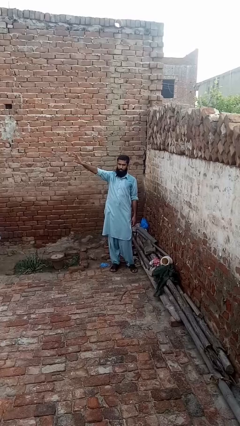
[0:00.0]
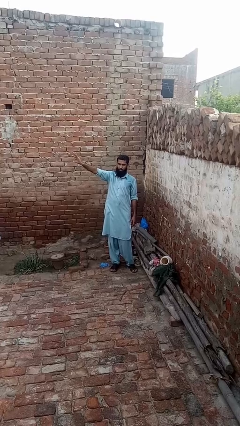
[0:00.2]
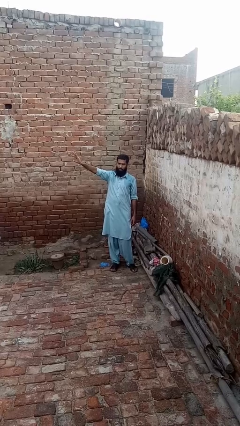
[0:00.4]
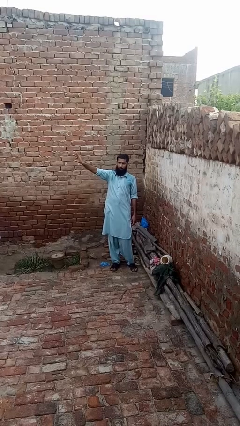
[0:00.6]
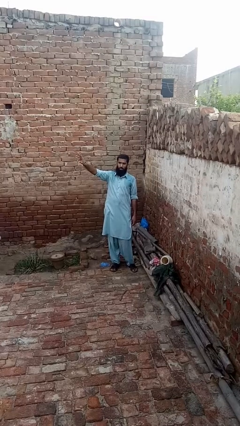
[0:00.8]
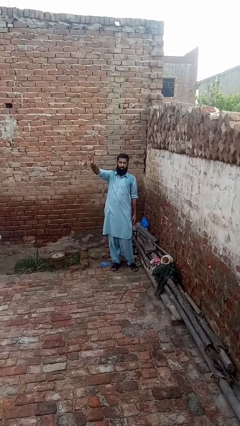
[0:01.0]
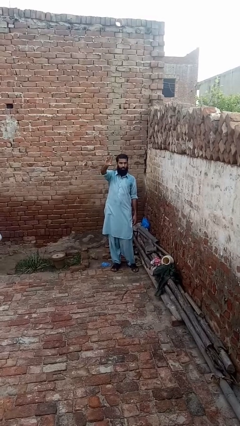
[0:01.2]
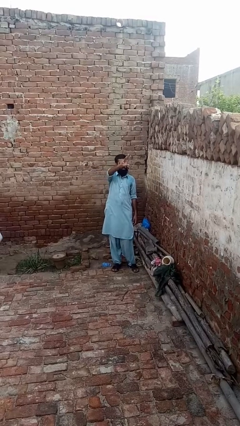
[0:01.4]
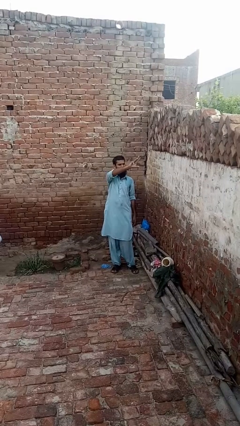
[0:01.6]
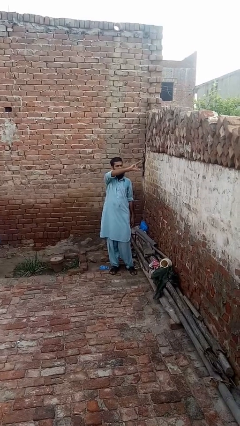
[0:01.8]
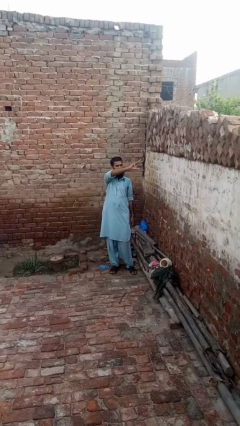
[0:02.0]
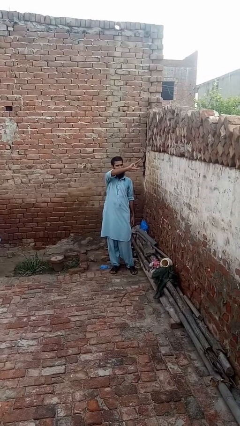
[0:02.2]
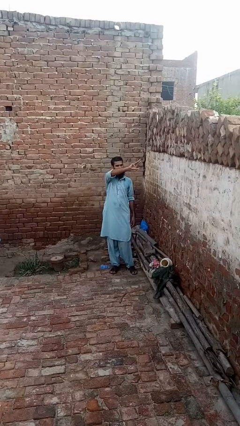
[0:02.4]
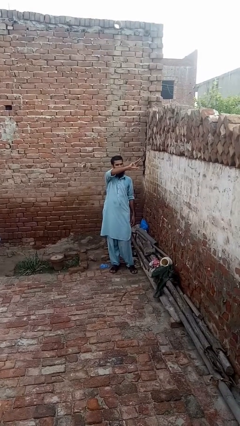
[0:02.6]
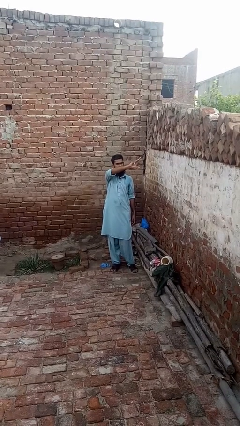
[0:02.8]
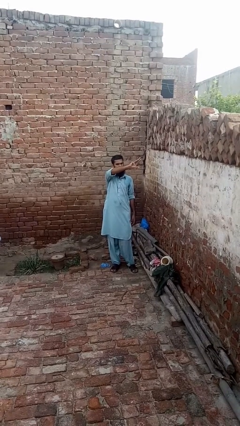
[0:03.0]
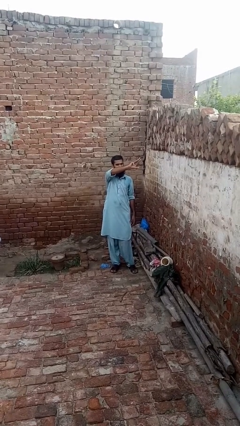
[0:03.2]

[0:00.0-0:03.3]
person gestures swipe left

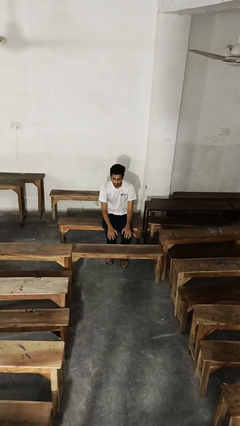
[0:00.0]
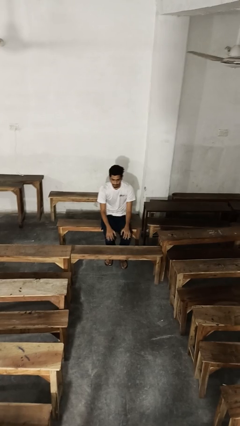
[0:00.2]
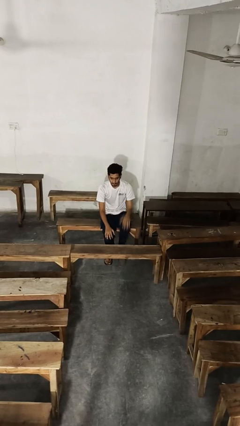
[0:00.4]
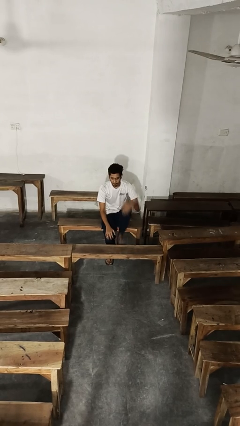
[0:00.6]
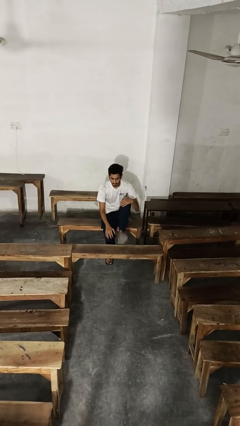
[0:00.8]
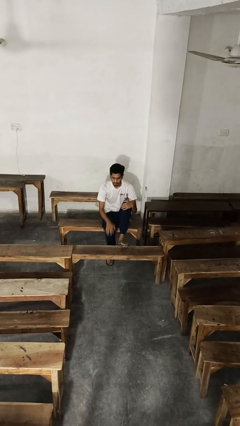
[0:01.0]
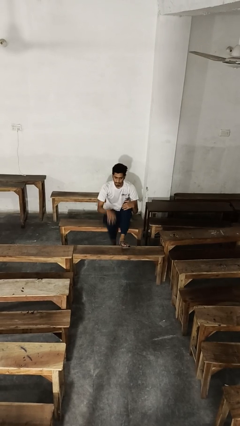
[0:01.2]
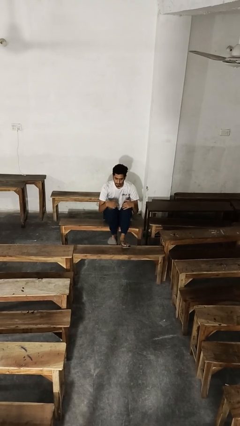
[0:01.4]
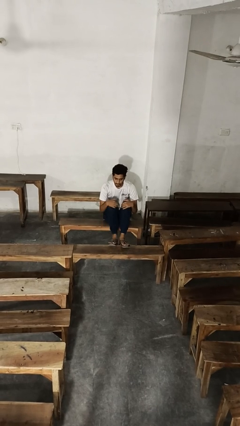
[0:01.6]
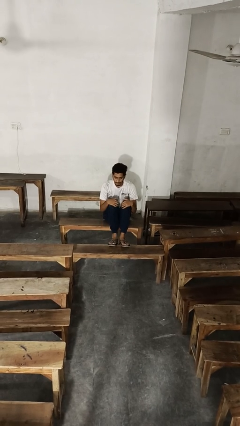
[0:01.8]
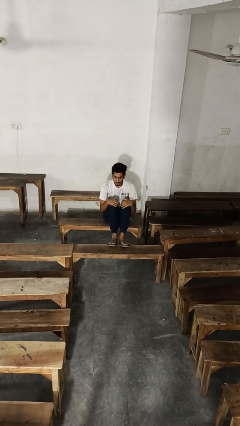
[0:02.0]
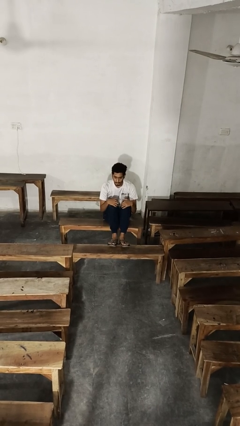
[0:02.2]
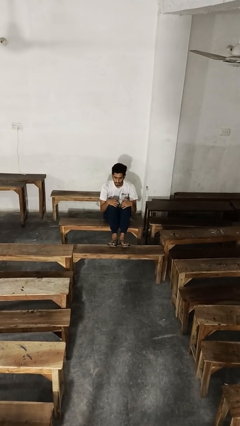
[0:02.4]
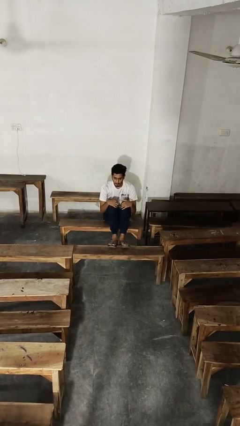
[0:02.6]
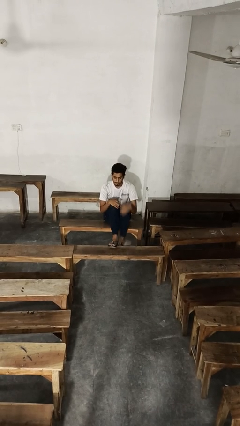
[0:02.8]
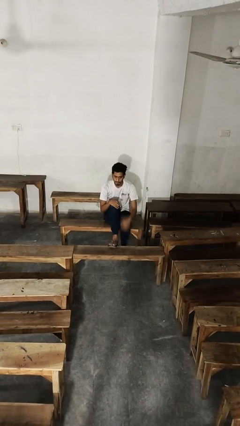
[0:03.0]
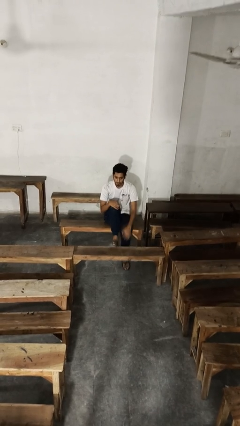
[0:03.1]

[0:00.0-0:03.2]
person puts feet up

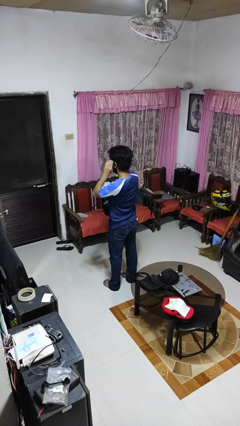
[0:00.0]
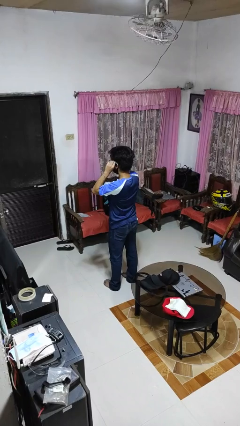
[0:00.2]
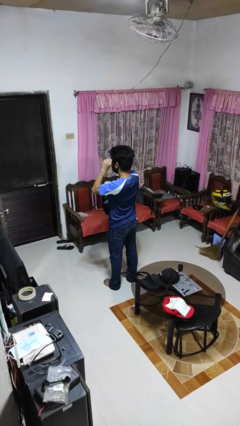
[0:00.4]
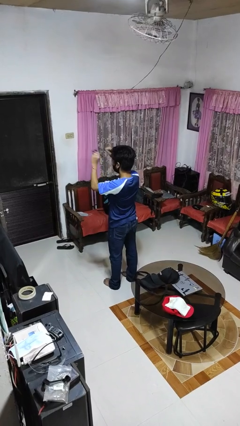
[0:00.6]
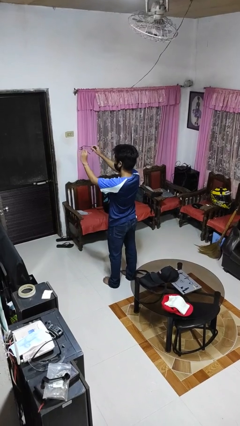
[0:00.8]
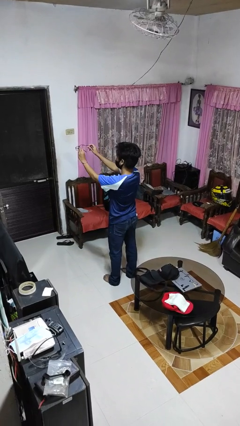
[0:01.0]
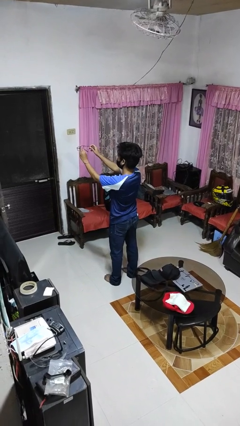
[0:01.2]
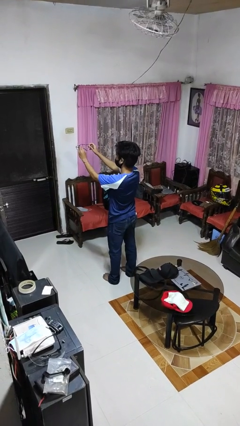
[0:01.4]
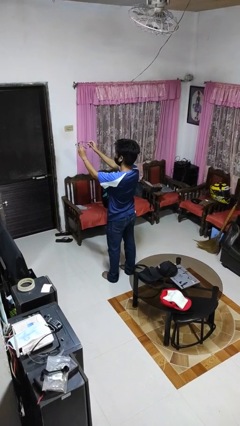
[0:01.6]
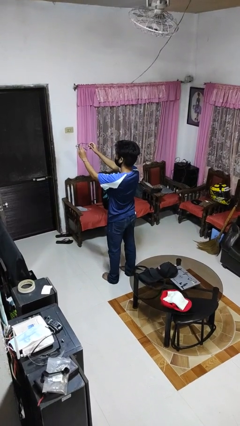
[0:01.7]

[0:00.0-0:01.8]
person takes off glasses

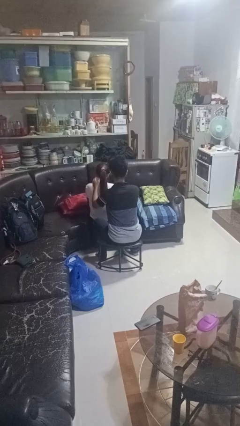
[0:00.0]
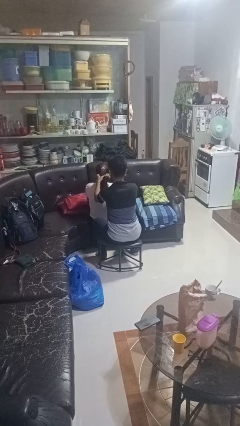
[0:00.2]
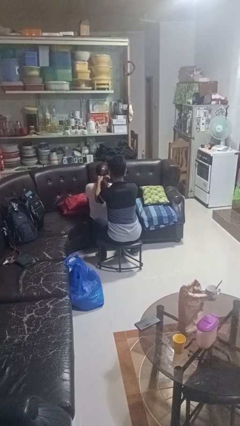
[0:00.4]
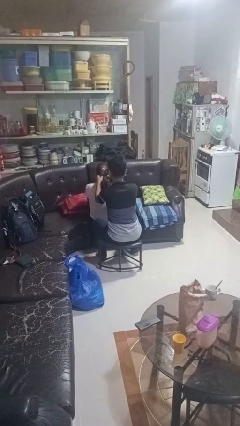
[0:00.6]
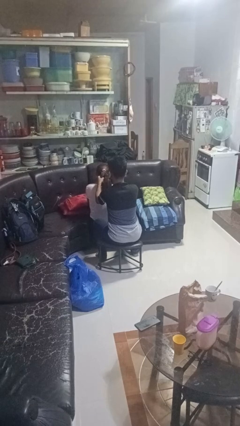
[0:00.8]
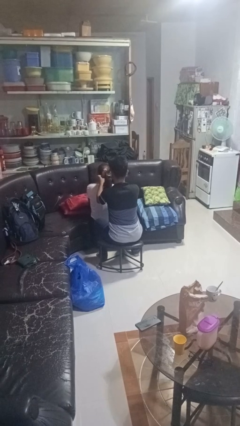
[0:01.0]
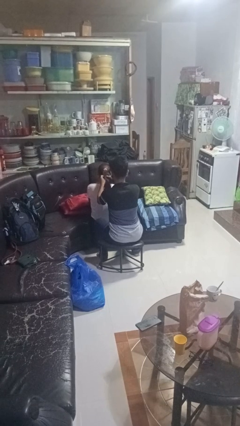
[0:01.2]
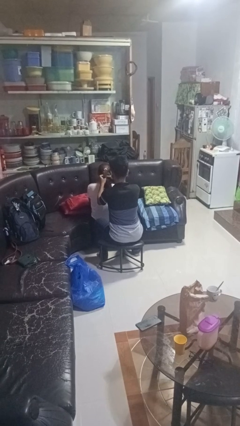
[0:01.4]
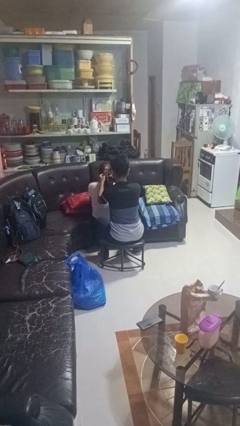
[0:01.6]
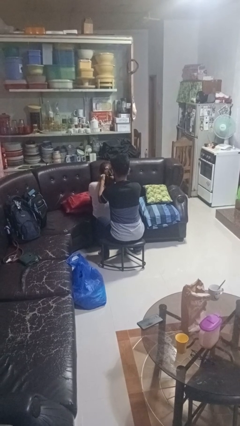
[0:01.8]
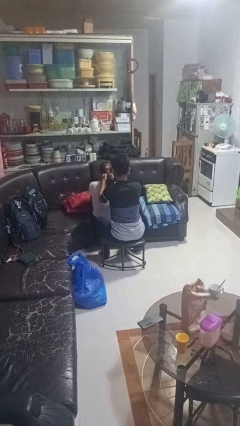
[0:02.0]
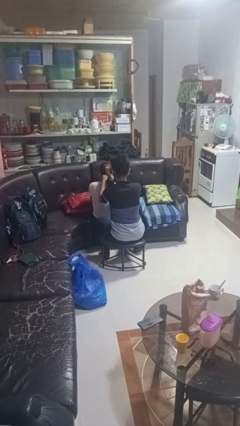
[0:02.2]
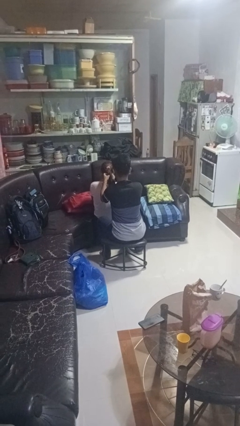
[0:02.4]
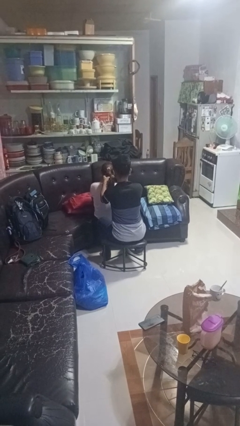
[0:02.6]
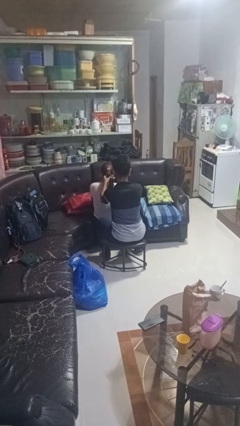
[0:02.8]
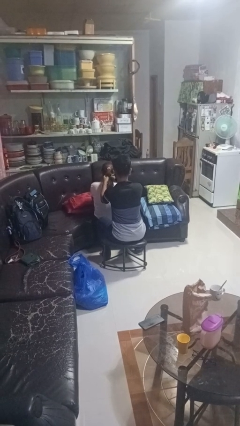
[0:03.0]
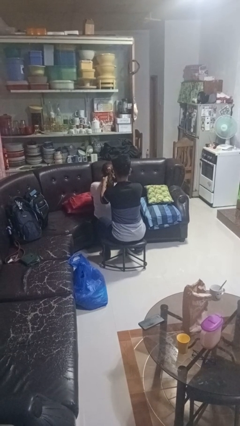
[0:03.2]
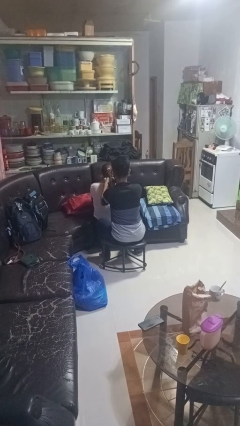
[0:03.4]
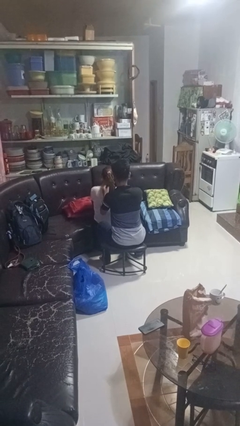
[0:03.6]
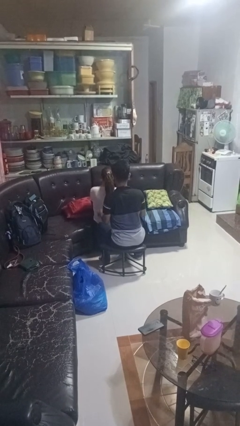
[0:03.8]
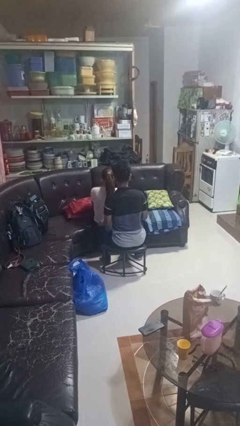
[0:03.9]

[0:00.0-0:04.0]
person braids hair of person

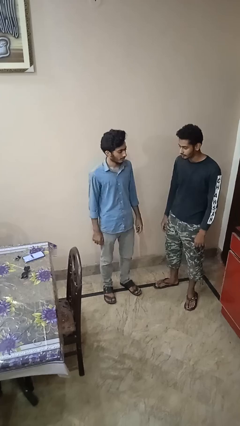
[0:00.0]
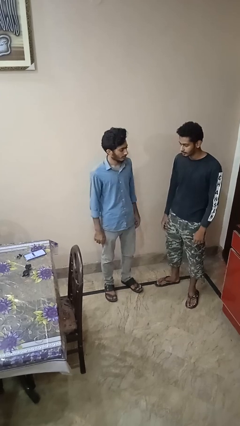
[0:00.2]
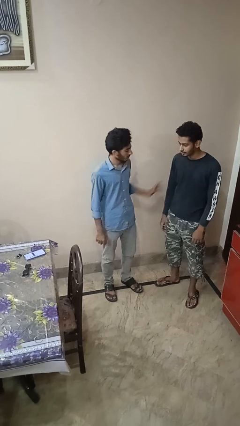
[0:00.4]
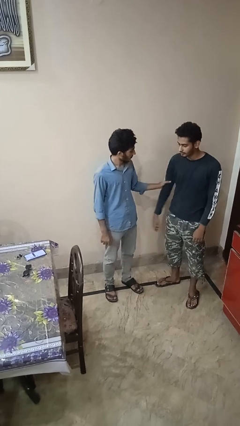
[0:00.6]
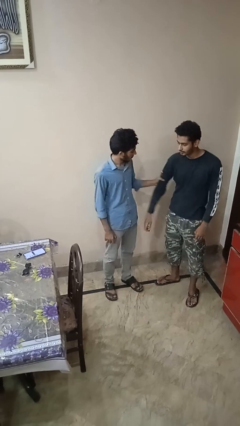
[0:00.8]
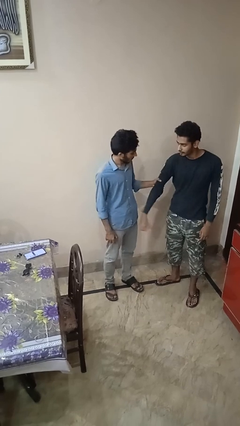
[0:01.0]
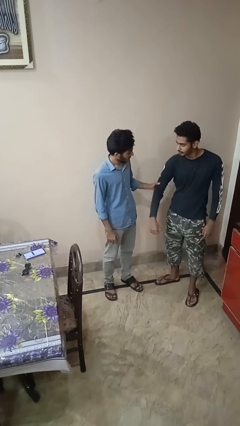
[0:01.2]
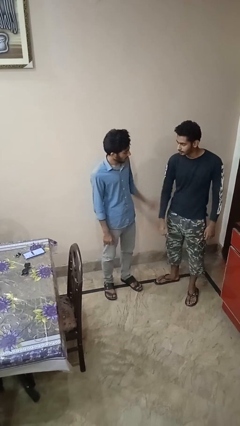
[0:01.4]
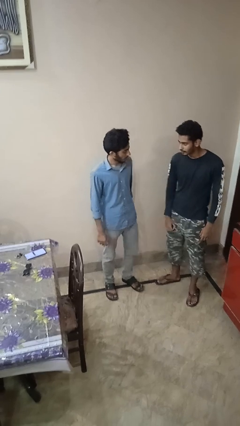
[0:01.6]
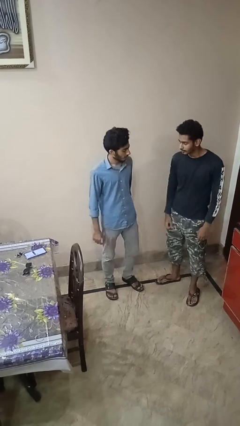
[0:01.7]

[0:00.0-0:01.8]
person grabs person by bicep

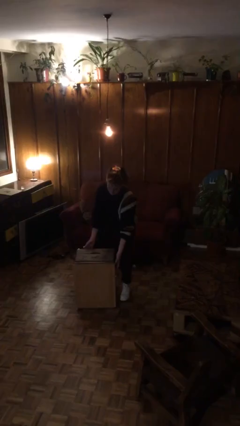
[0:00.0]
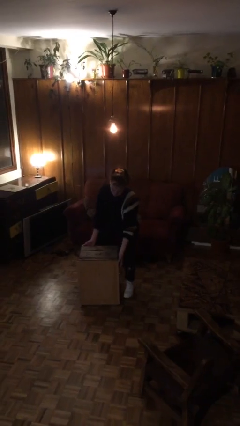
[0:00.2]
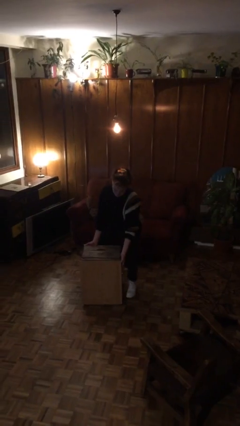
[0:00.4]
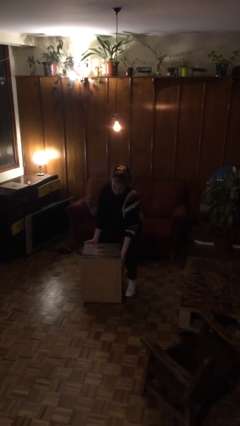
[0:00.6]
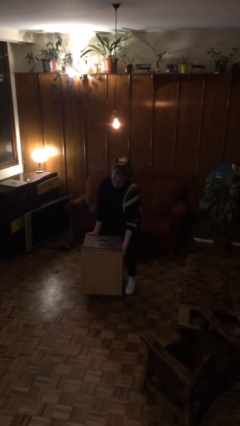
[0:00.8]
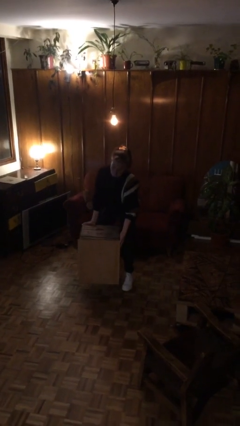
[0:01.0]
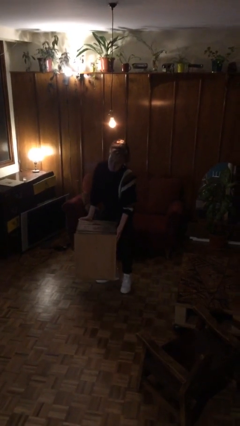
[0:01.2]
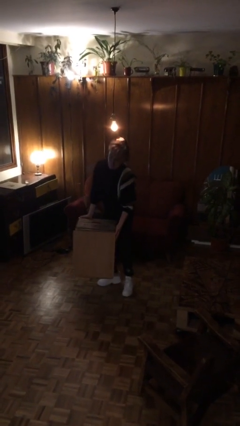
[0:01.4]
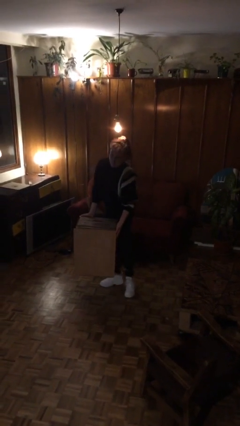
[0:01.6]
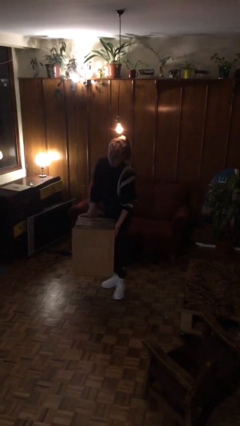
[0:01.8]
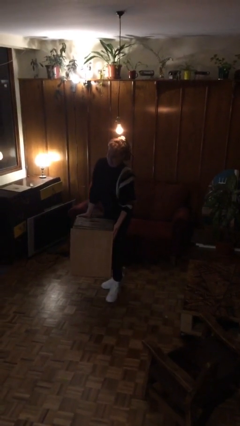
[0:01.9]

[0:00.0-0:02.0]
person picks up object from floor

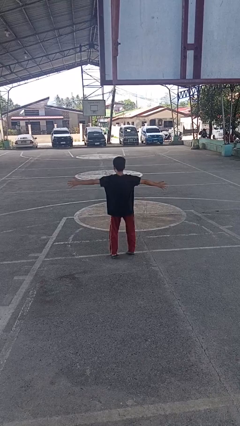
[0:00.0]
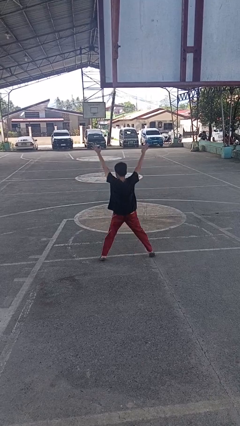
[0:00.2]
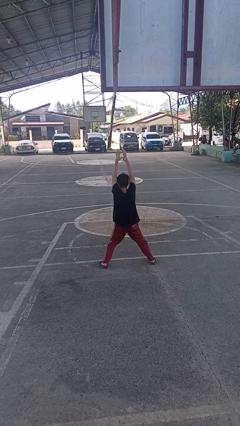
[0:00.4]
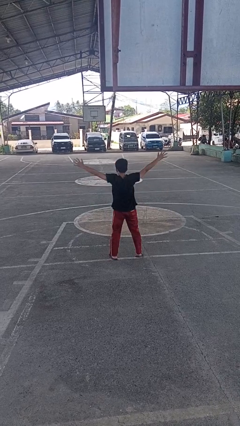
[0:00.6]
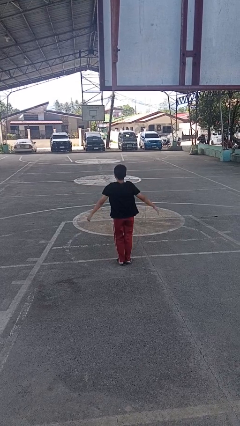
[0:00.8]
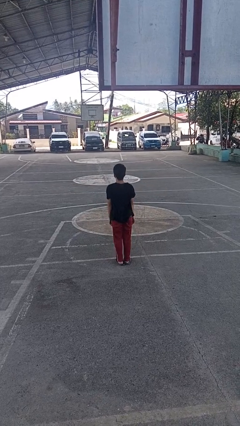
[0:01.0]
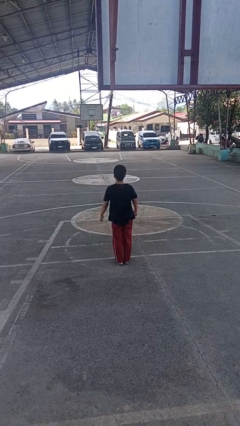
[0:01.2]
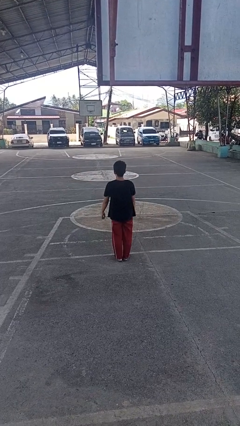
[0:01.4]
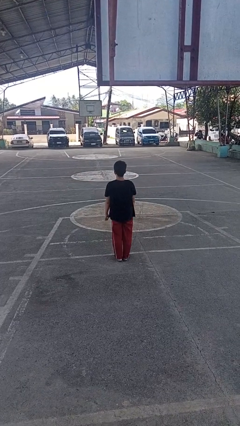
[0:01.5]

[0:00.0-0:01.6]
person exercises with jumping jacks
